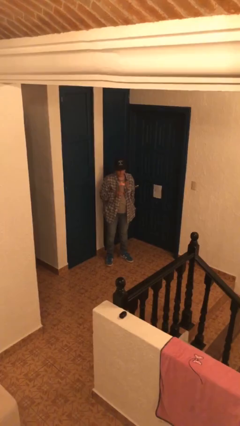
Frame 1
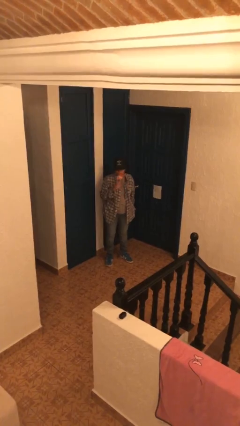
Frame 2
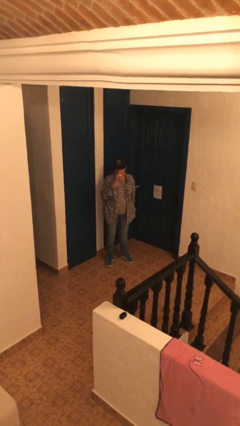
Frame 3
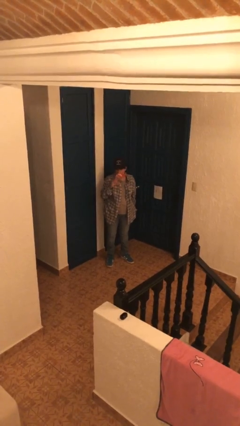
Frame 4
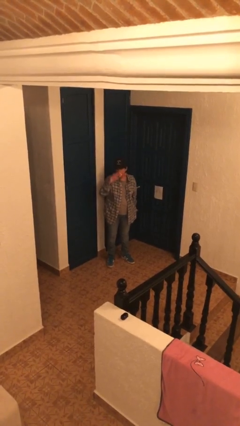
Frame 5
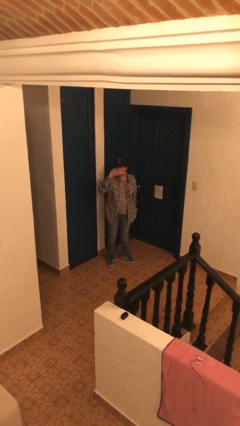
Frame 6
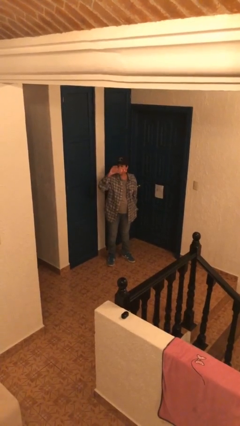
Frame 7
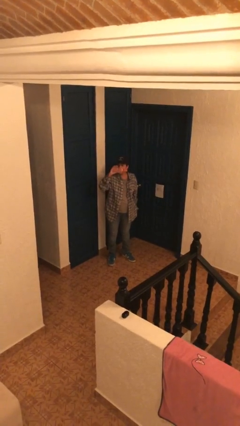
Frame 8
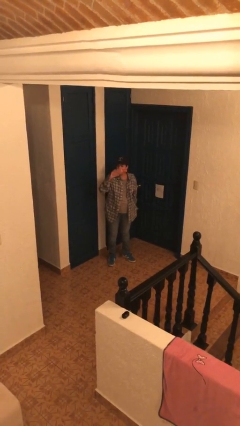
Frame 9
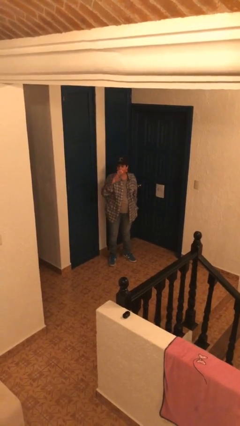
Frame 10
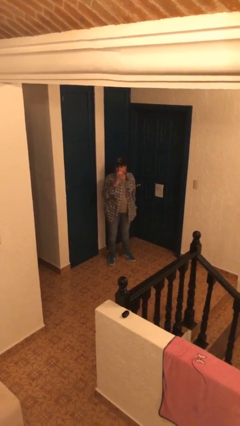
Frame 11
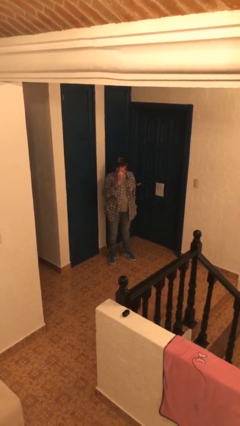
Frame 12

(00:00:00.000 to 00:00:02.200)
person drinks from bottle

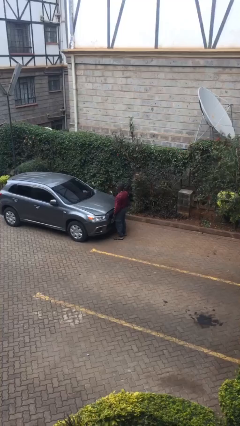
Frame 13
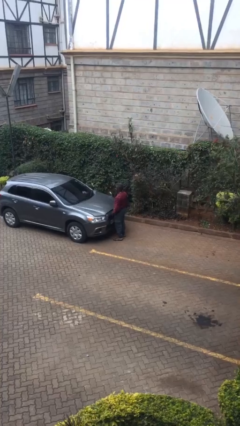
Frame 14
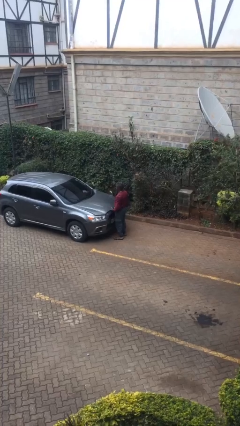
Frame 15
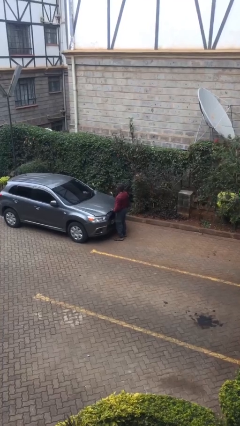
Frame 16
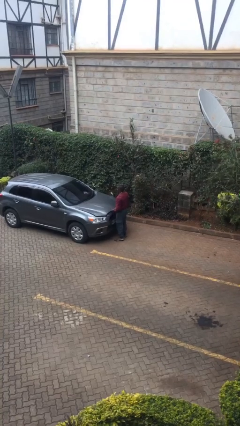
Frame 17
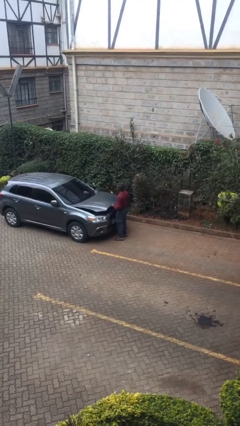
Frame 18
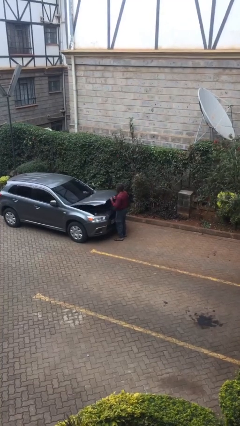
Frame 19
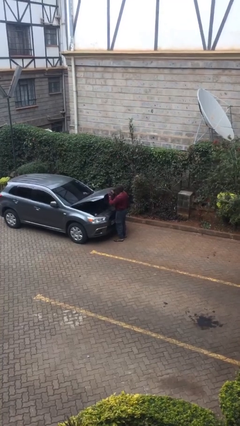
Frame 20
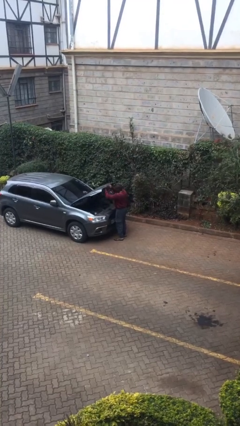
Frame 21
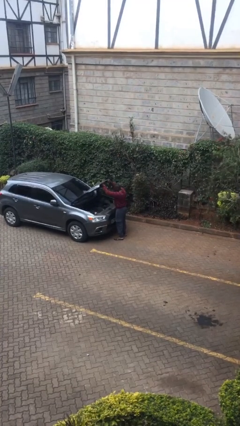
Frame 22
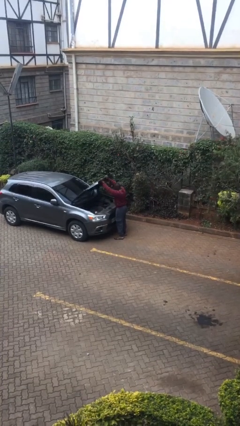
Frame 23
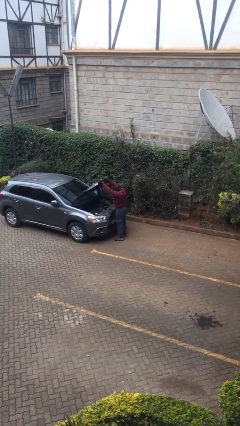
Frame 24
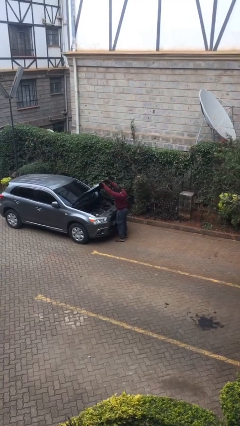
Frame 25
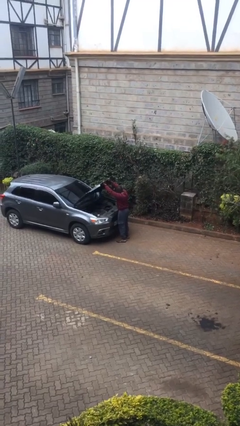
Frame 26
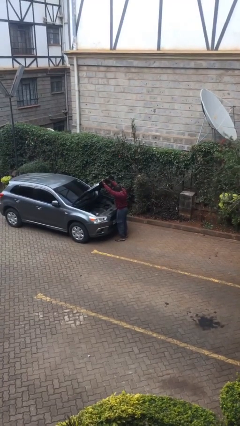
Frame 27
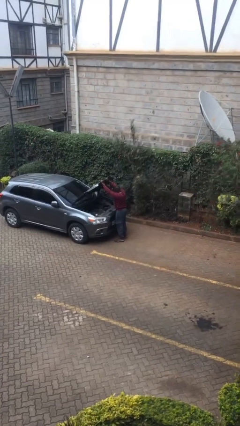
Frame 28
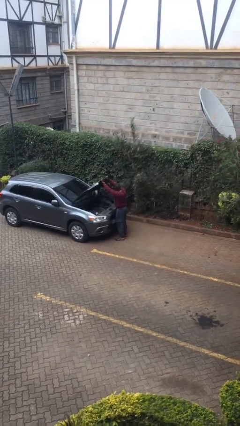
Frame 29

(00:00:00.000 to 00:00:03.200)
person opens car hood

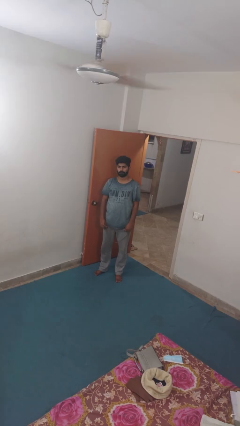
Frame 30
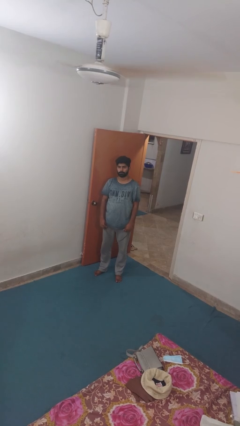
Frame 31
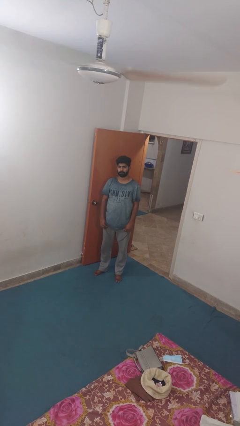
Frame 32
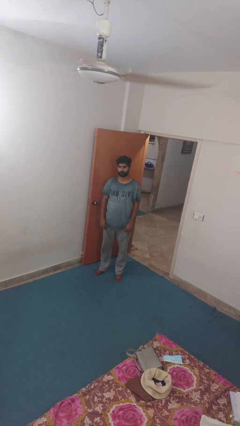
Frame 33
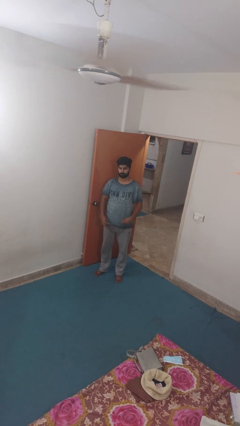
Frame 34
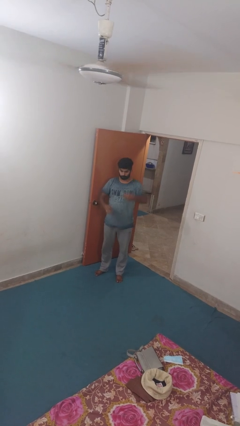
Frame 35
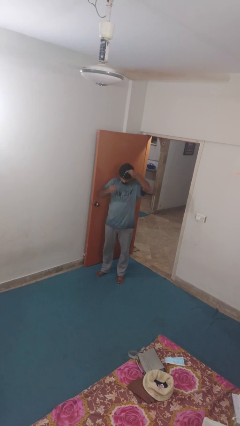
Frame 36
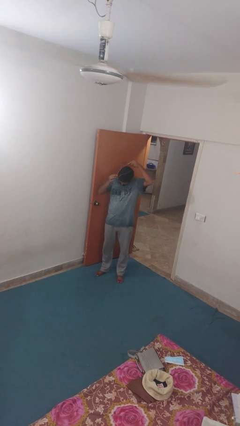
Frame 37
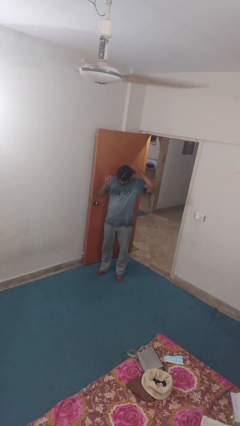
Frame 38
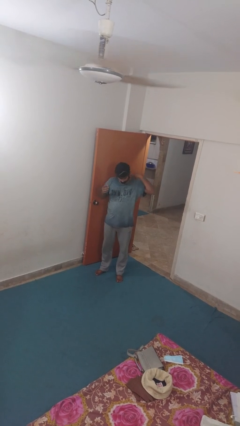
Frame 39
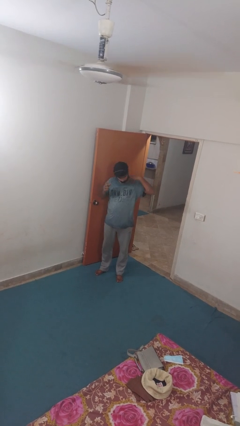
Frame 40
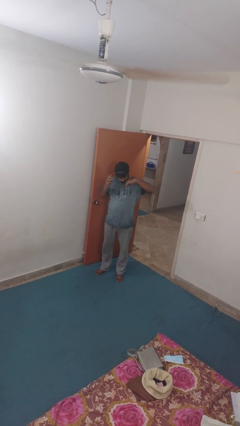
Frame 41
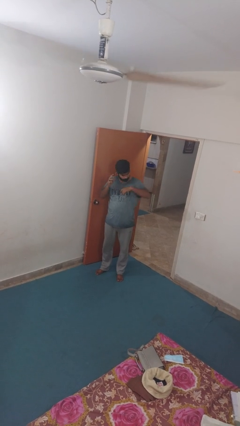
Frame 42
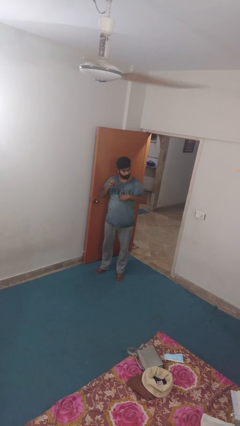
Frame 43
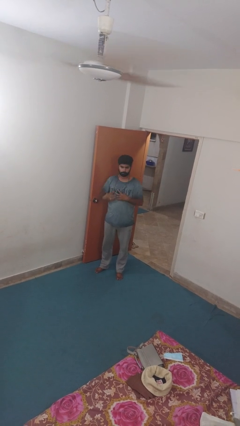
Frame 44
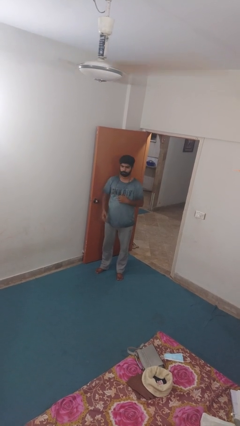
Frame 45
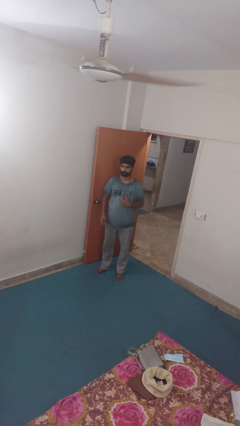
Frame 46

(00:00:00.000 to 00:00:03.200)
person puts on necklace

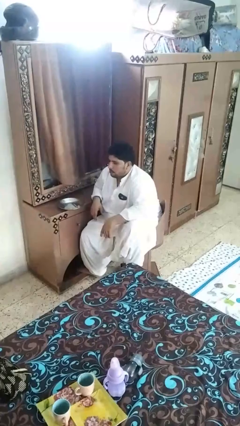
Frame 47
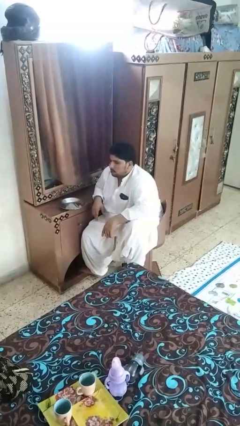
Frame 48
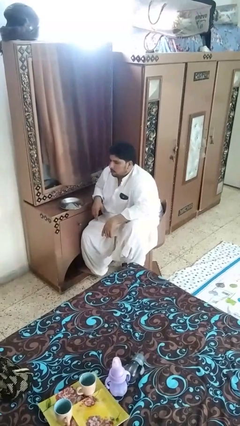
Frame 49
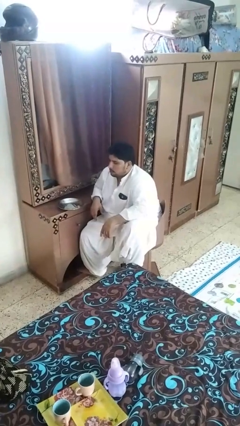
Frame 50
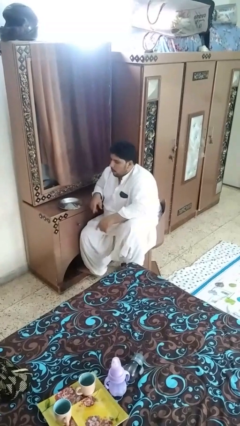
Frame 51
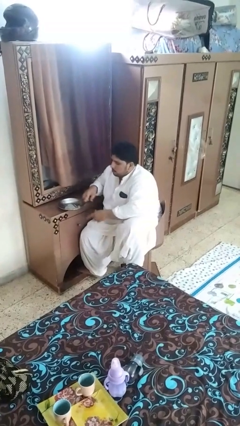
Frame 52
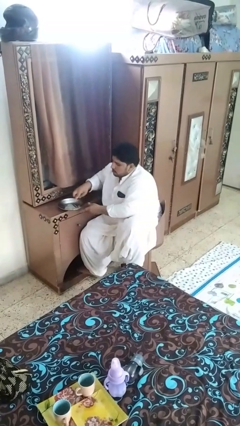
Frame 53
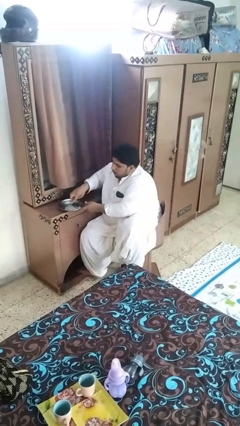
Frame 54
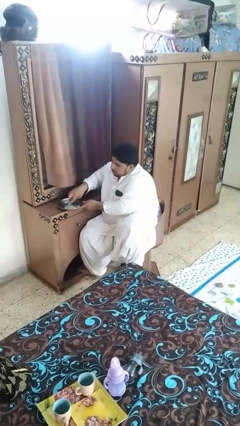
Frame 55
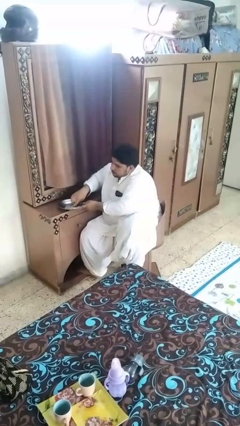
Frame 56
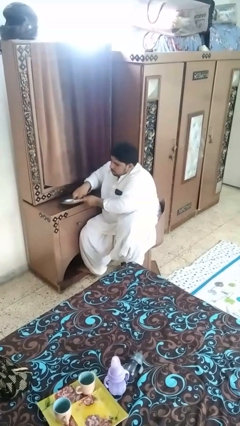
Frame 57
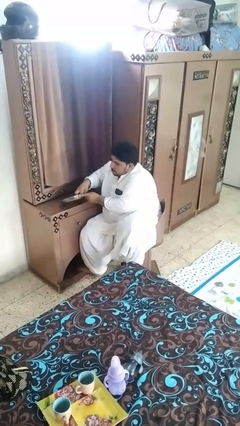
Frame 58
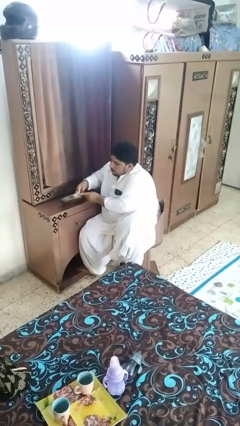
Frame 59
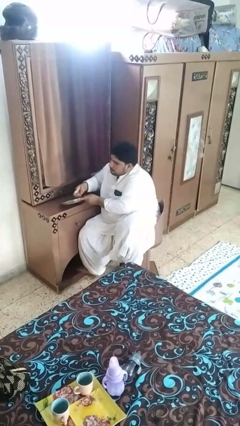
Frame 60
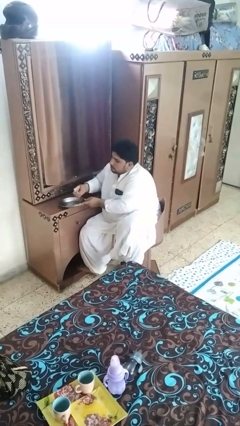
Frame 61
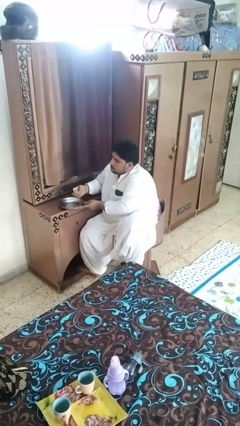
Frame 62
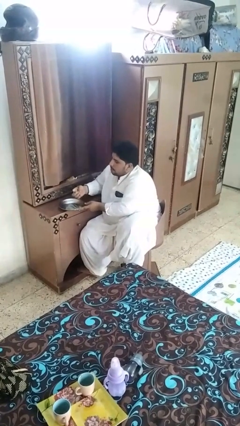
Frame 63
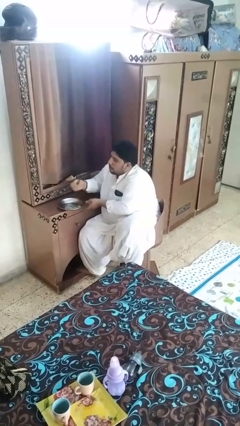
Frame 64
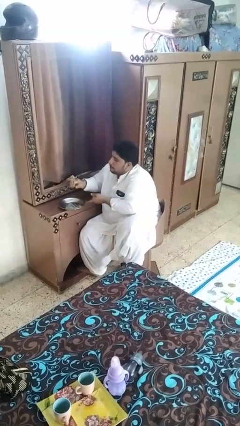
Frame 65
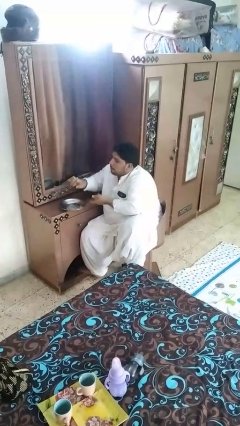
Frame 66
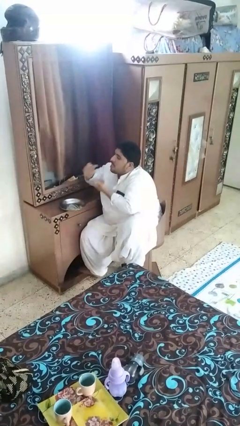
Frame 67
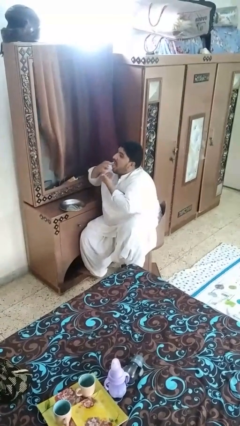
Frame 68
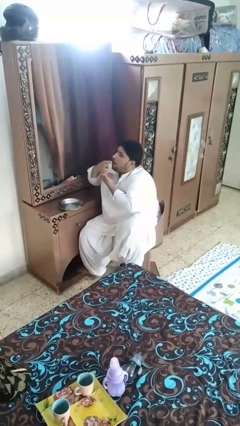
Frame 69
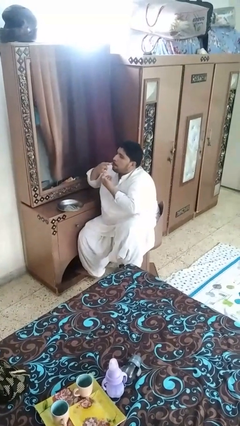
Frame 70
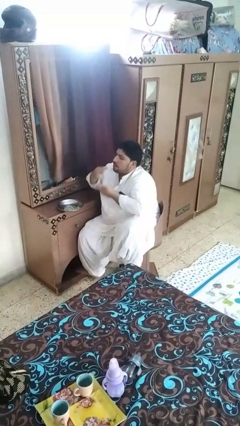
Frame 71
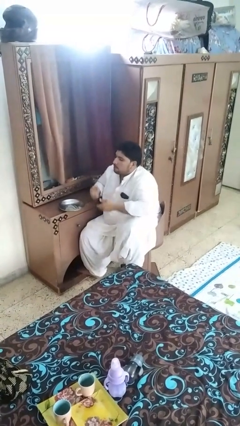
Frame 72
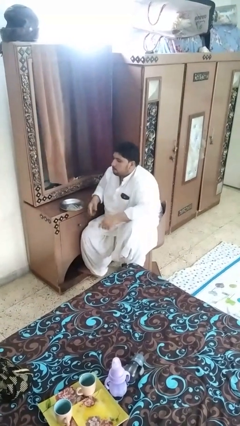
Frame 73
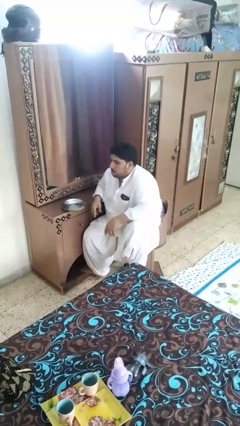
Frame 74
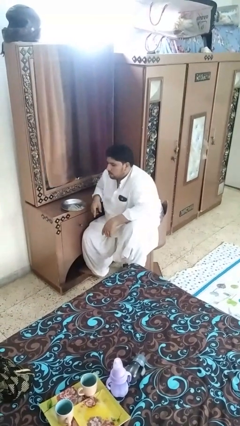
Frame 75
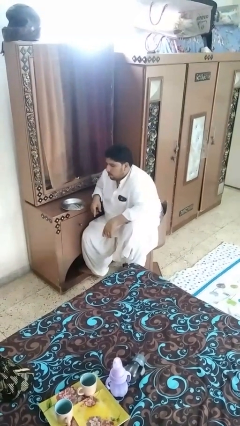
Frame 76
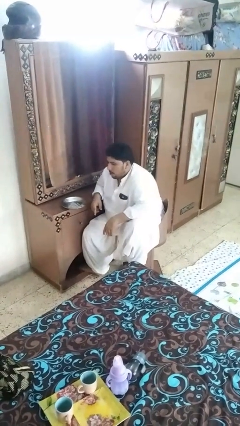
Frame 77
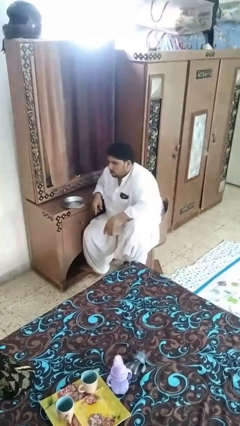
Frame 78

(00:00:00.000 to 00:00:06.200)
person eats with hands

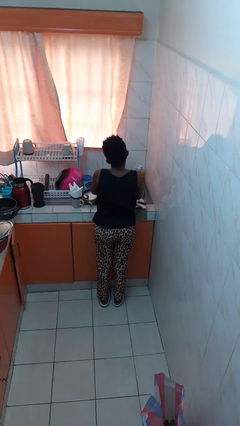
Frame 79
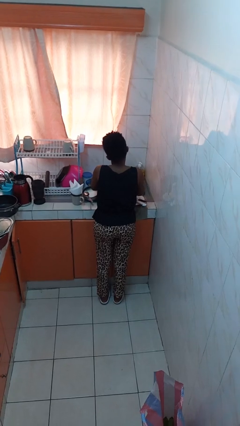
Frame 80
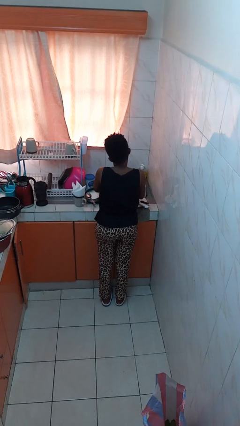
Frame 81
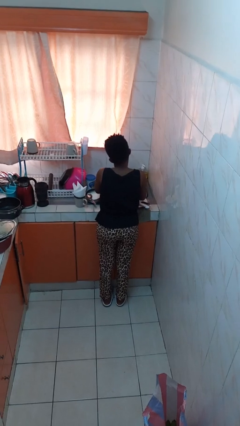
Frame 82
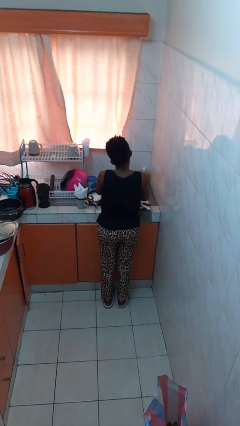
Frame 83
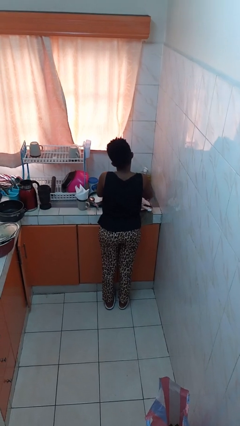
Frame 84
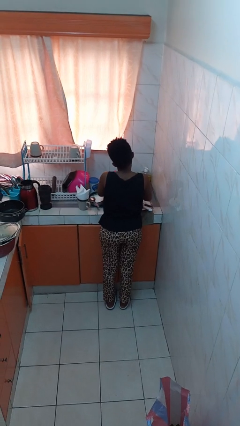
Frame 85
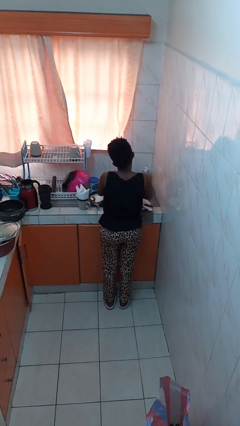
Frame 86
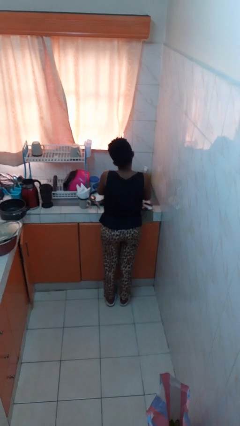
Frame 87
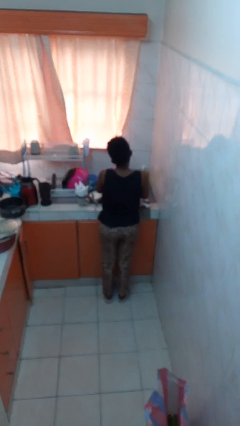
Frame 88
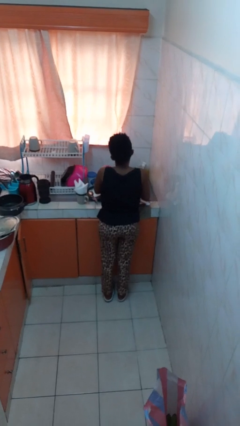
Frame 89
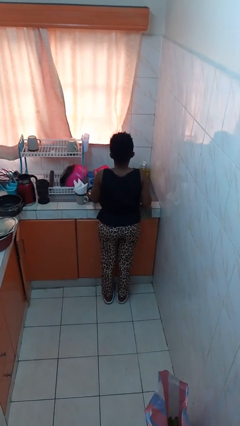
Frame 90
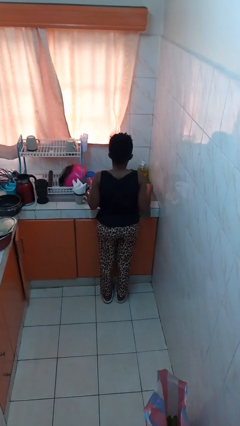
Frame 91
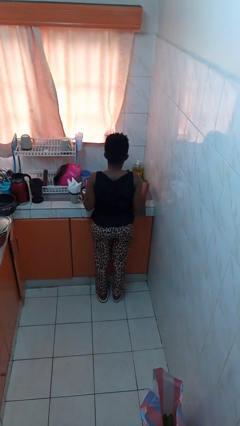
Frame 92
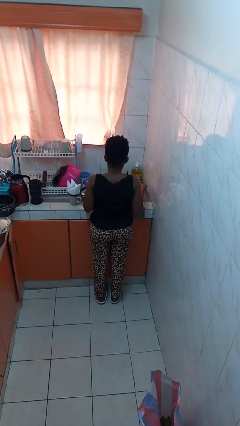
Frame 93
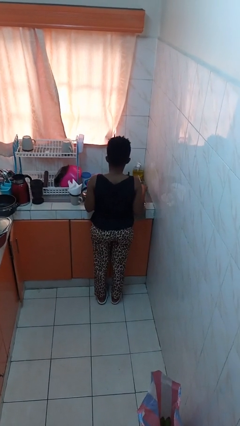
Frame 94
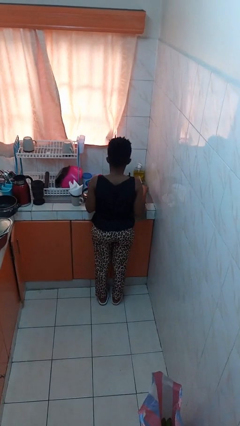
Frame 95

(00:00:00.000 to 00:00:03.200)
person washes dish
